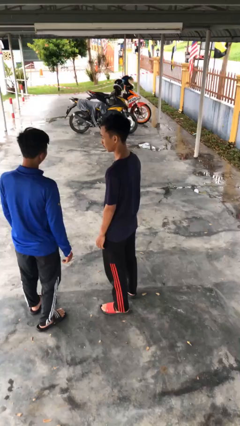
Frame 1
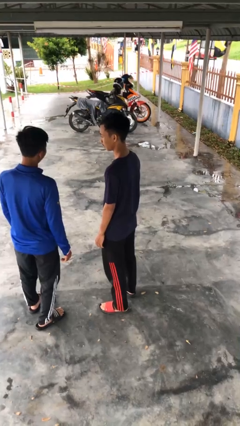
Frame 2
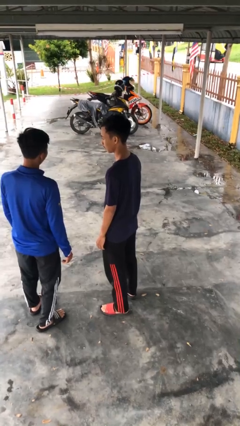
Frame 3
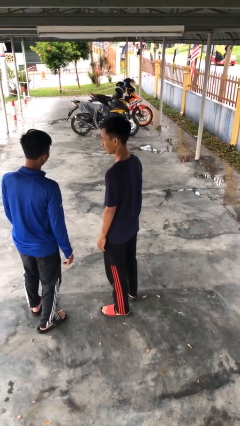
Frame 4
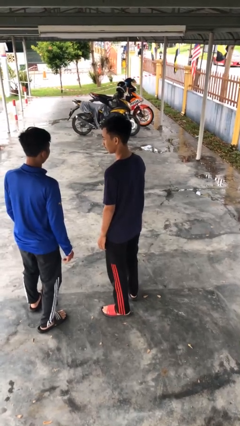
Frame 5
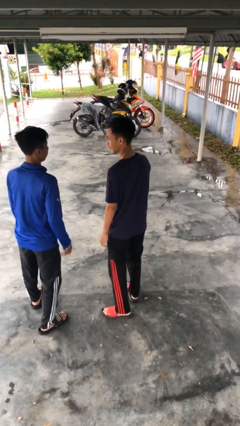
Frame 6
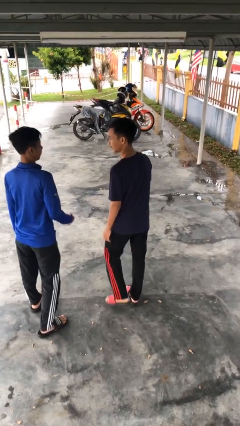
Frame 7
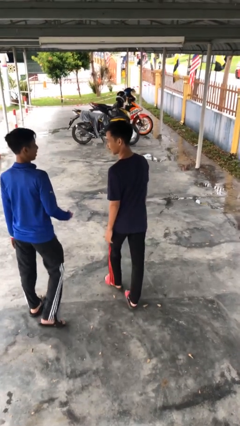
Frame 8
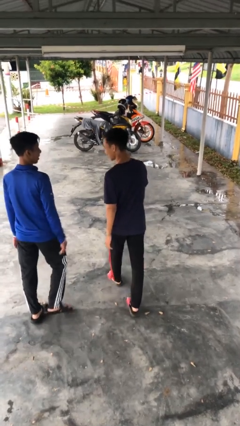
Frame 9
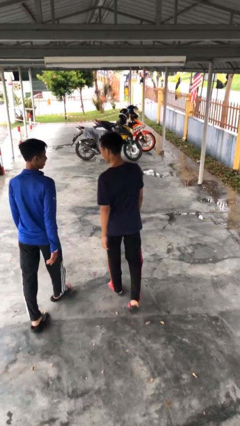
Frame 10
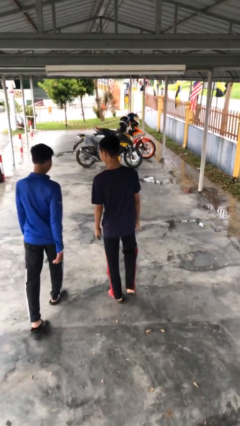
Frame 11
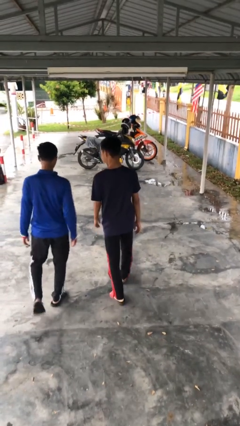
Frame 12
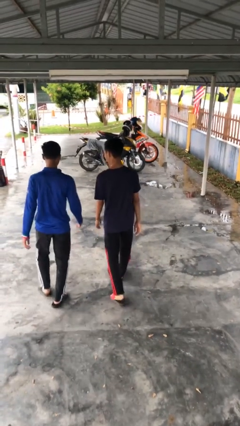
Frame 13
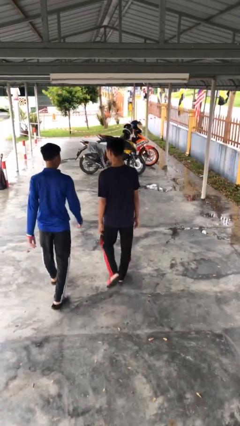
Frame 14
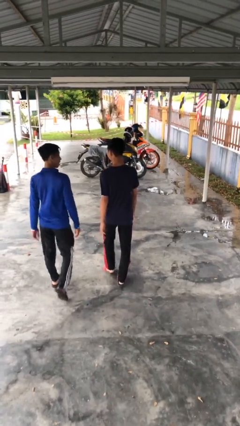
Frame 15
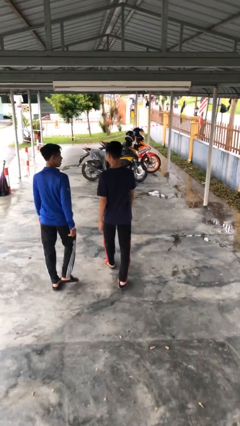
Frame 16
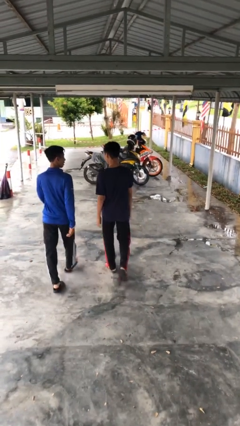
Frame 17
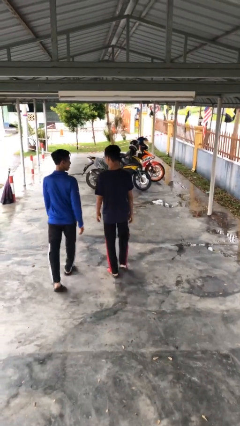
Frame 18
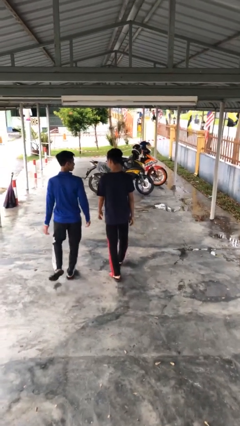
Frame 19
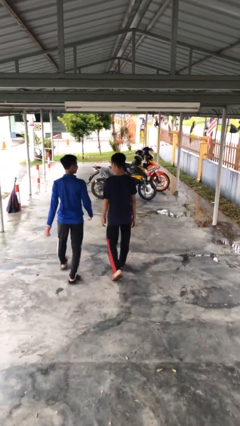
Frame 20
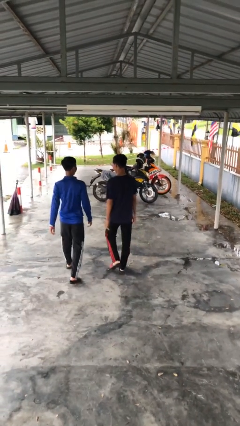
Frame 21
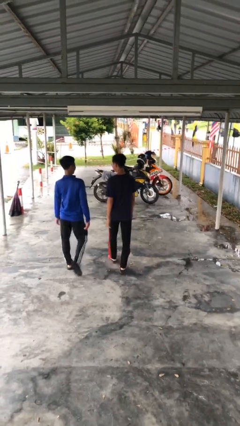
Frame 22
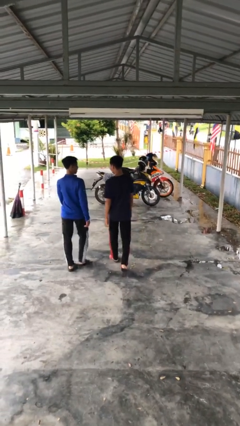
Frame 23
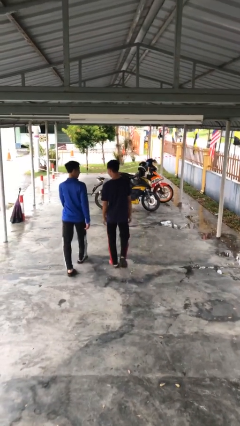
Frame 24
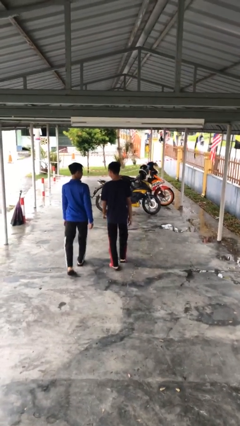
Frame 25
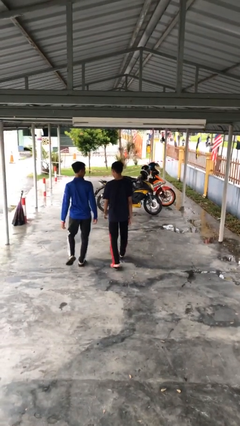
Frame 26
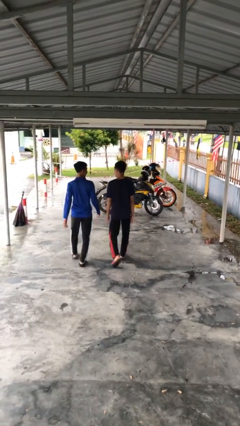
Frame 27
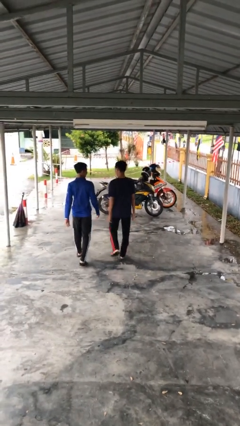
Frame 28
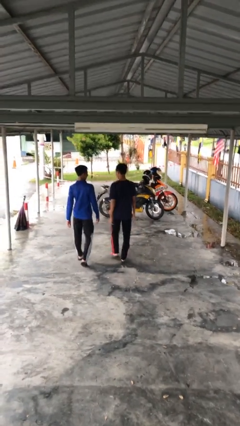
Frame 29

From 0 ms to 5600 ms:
person talks to person

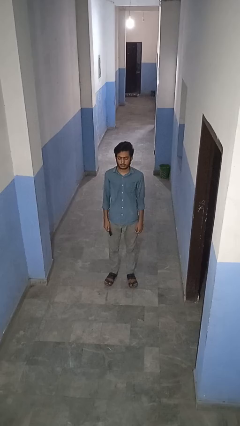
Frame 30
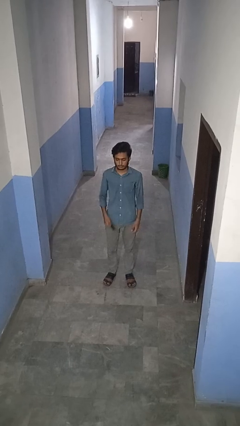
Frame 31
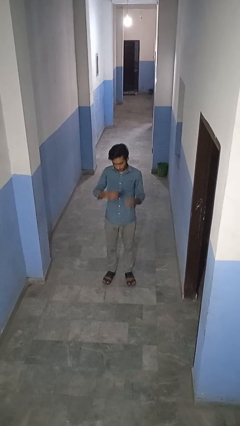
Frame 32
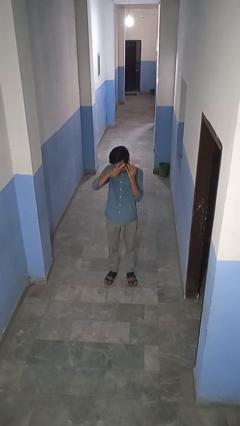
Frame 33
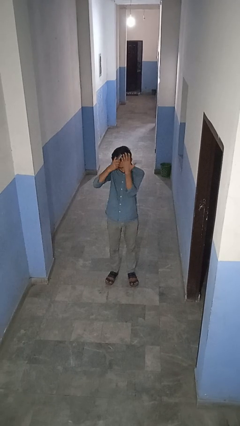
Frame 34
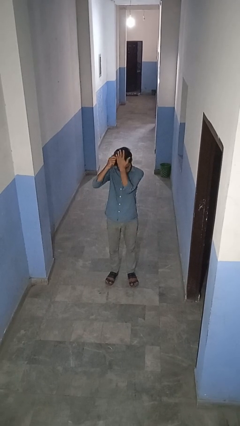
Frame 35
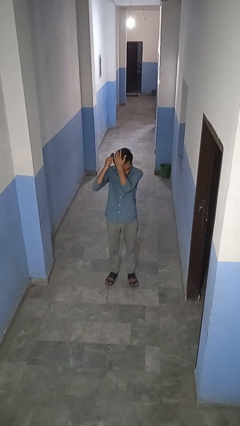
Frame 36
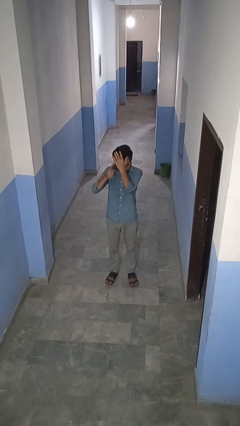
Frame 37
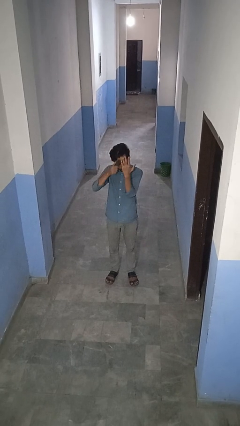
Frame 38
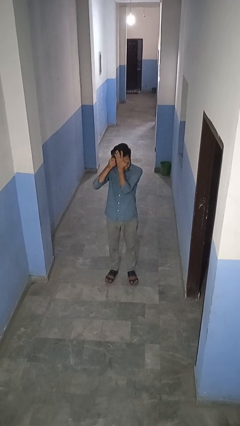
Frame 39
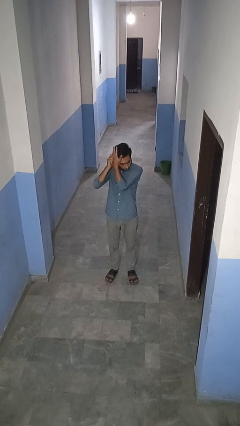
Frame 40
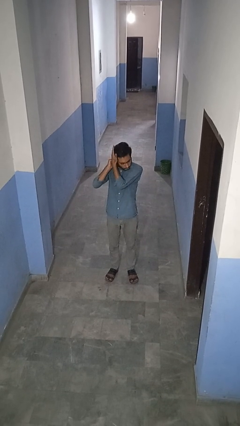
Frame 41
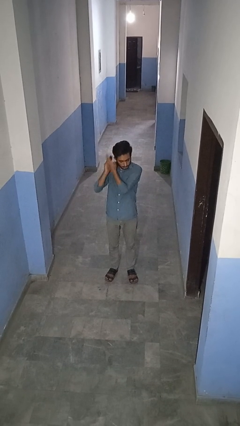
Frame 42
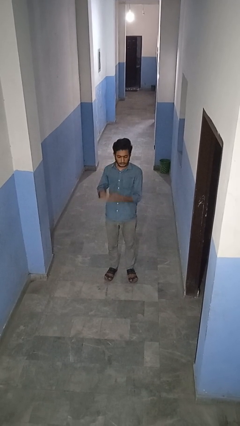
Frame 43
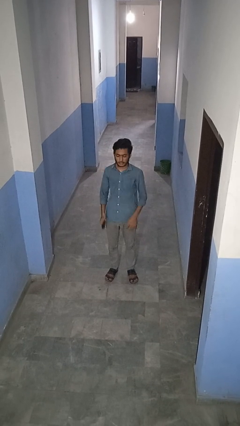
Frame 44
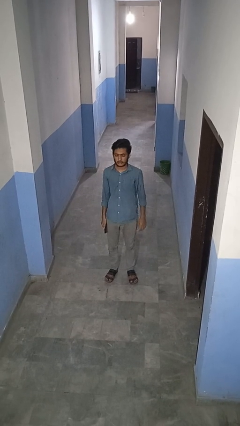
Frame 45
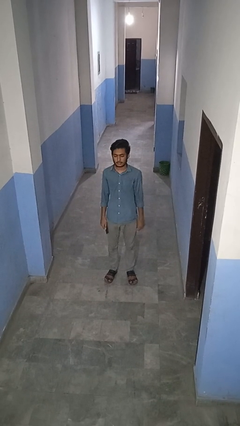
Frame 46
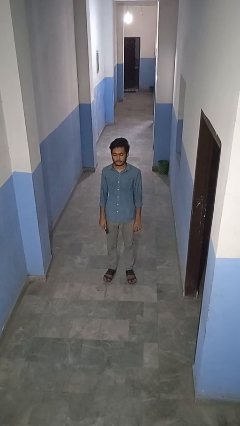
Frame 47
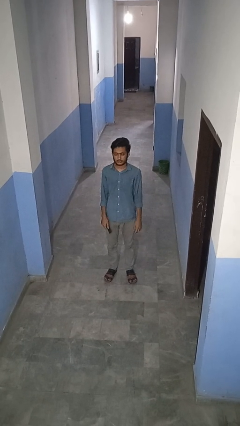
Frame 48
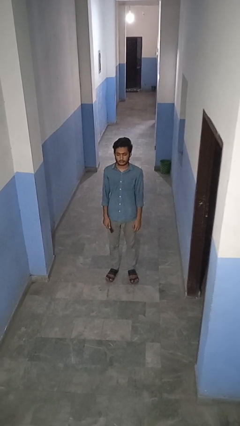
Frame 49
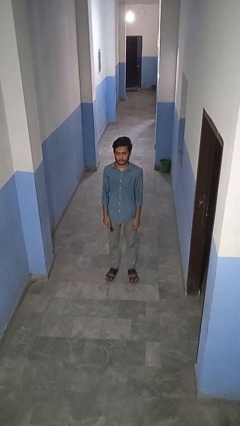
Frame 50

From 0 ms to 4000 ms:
person brushes hair

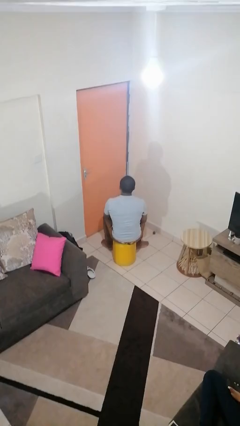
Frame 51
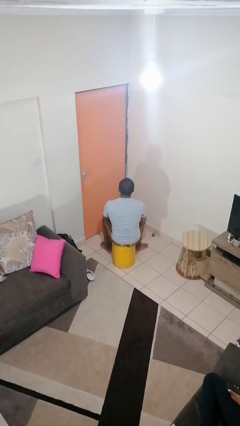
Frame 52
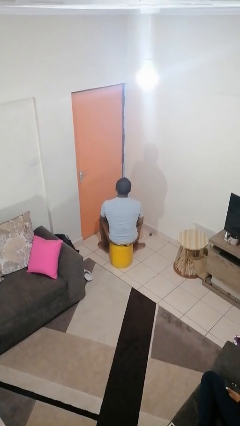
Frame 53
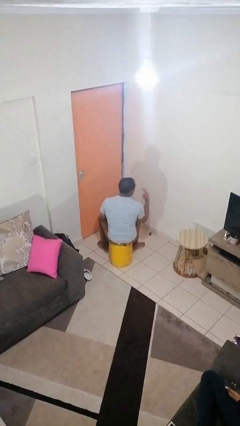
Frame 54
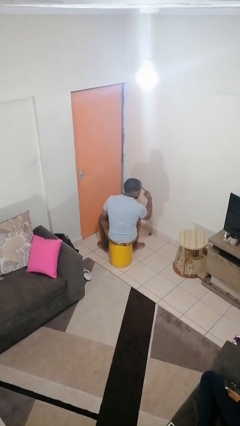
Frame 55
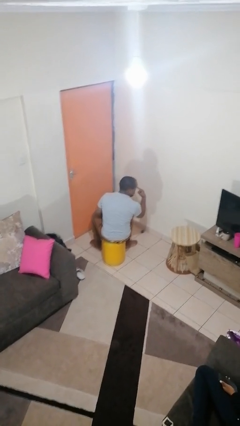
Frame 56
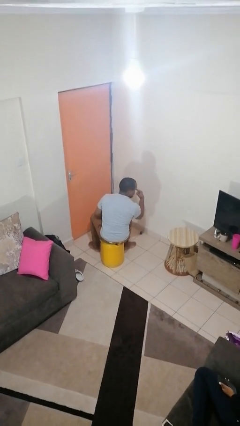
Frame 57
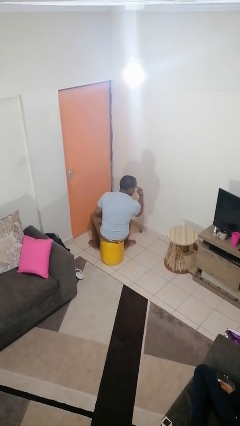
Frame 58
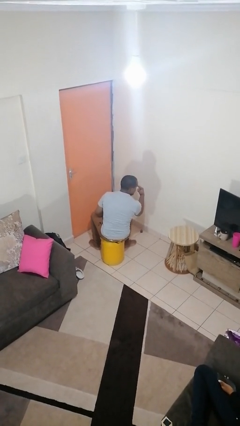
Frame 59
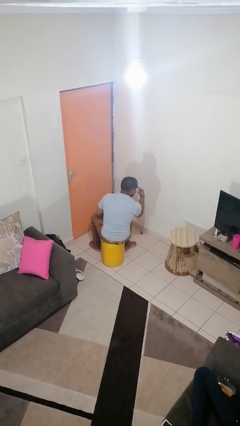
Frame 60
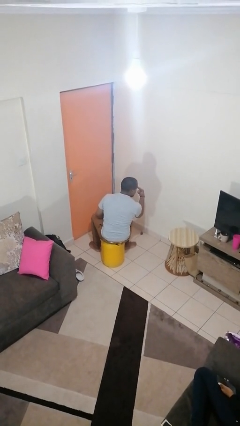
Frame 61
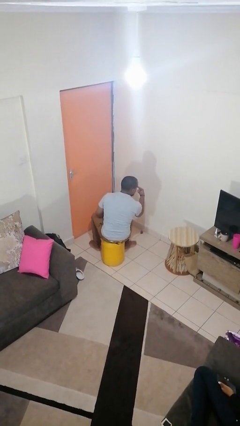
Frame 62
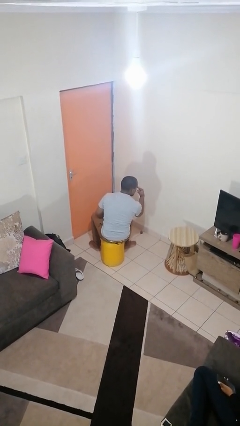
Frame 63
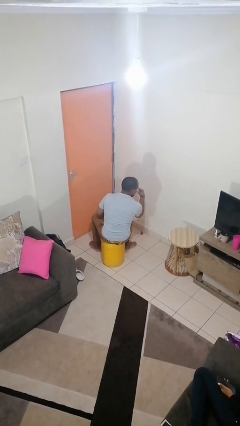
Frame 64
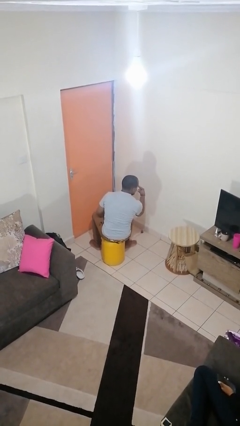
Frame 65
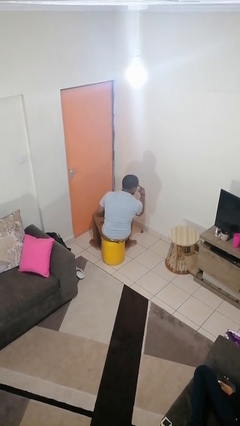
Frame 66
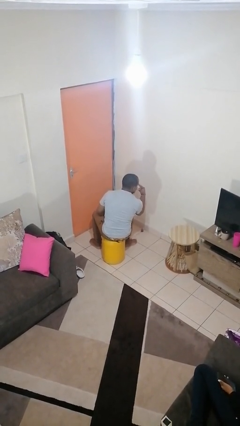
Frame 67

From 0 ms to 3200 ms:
person gestures watch closely

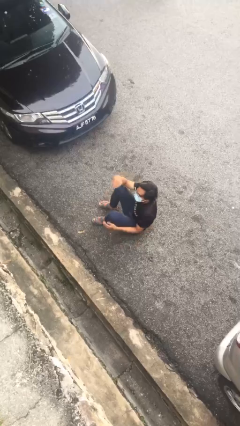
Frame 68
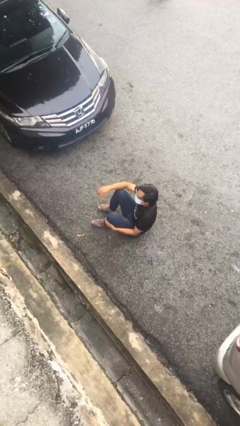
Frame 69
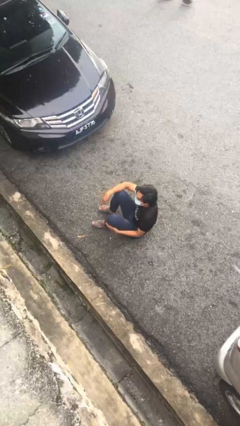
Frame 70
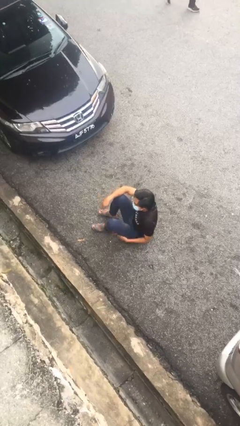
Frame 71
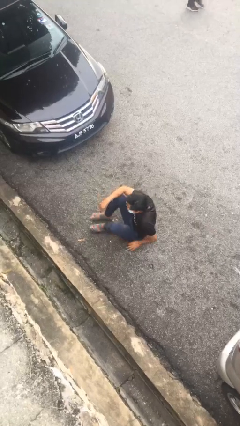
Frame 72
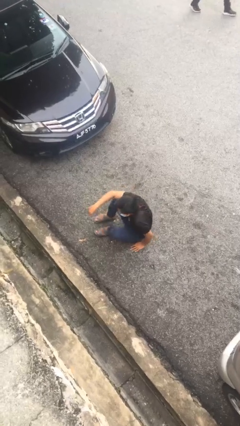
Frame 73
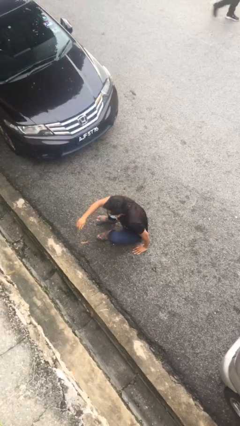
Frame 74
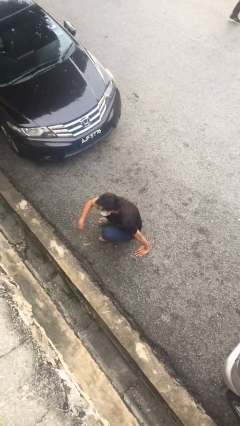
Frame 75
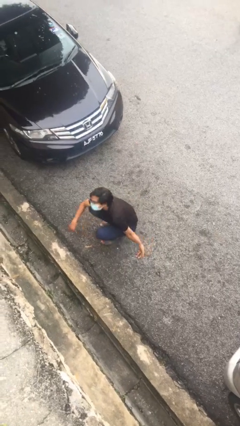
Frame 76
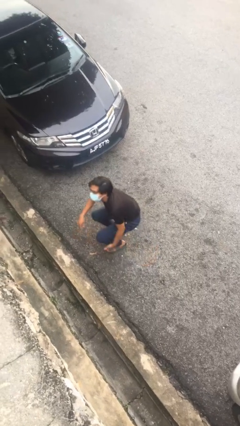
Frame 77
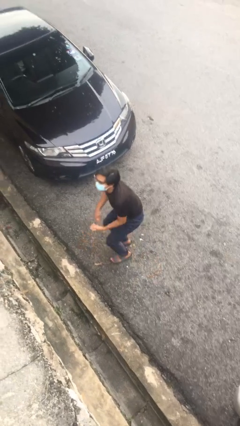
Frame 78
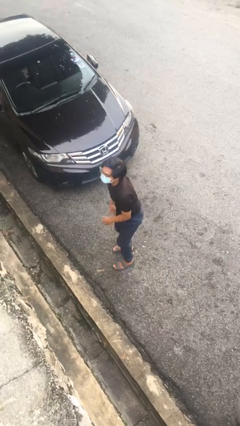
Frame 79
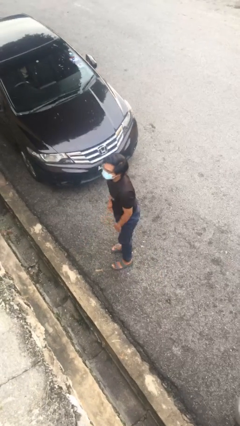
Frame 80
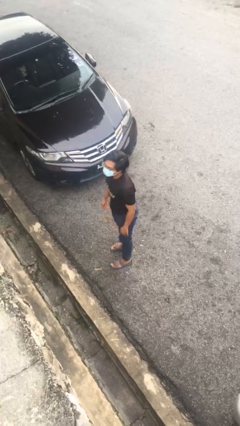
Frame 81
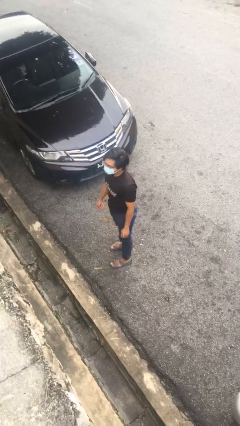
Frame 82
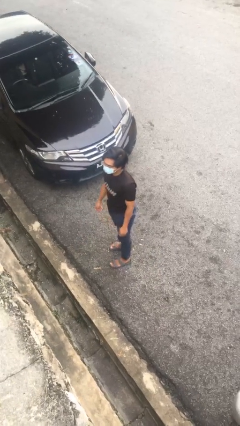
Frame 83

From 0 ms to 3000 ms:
person stands up

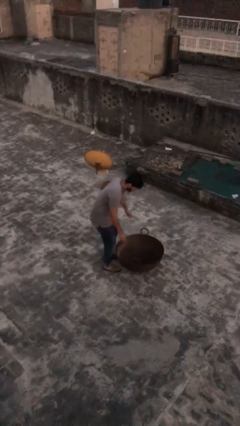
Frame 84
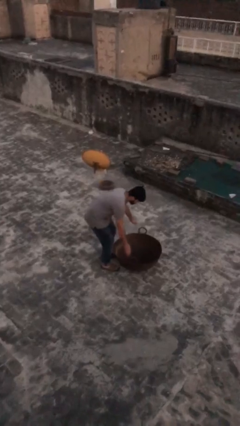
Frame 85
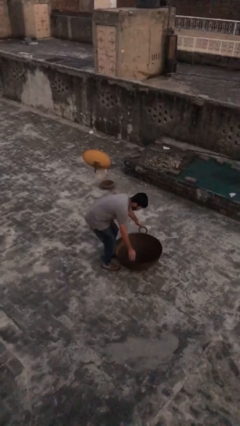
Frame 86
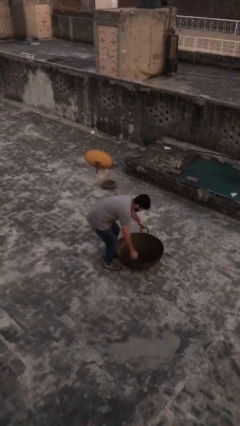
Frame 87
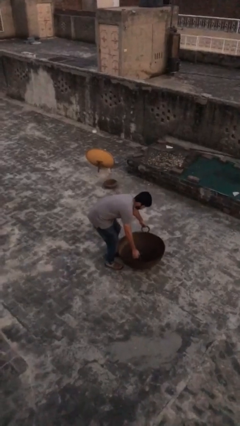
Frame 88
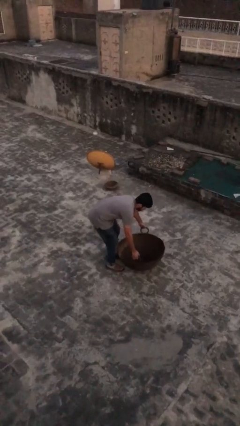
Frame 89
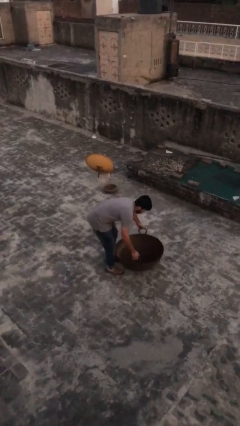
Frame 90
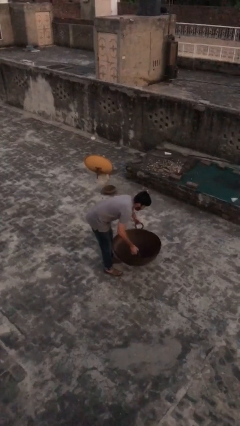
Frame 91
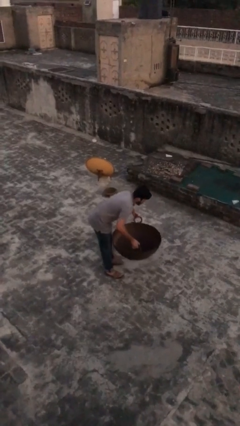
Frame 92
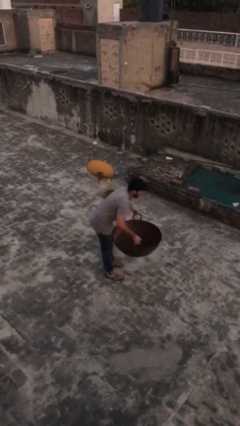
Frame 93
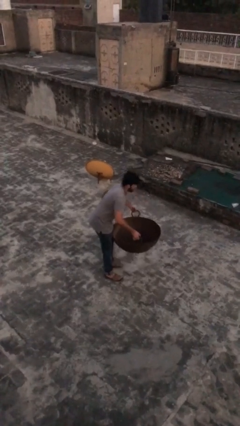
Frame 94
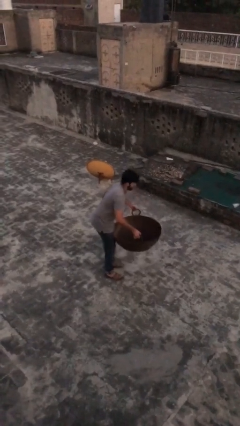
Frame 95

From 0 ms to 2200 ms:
person picks up object from floor
